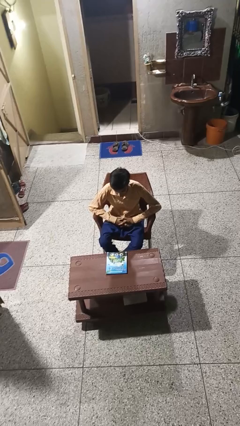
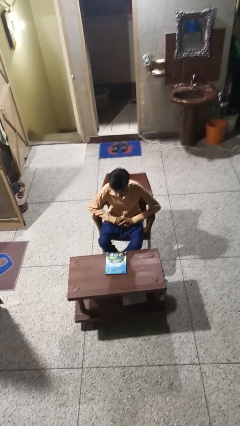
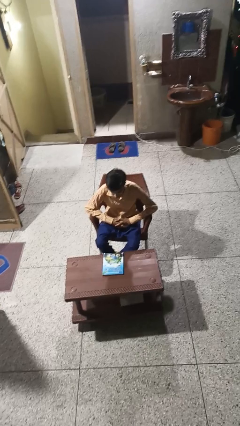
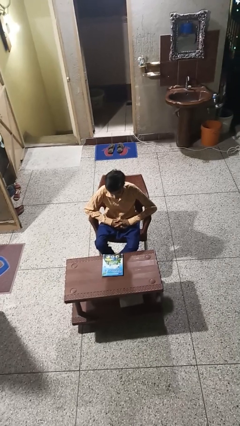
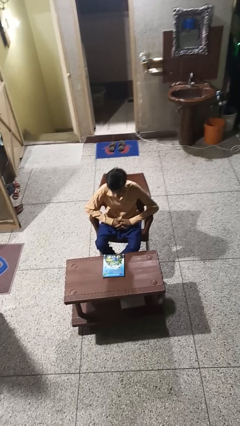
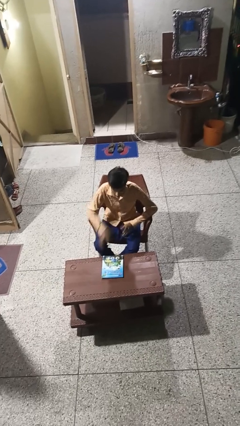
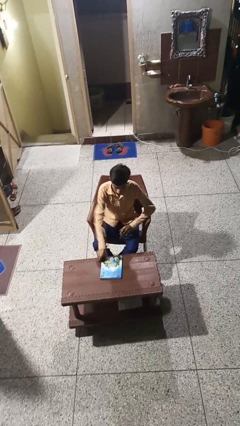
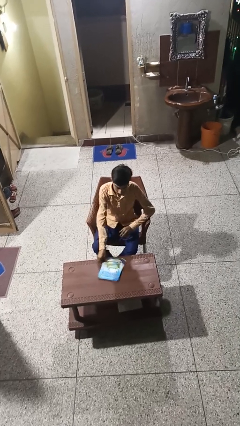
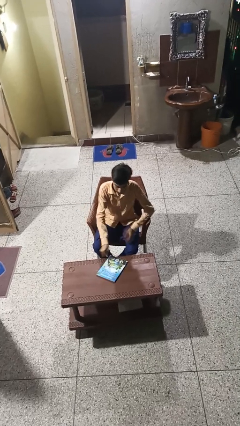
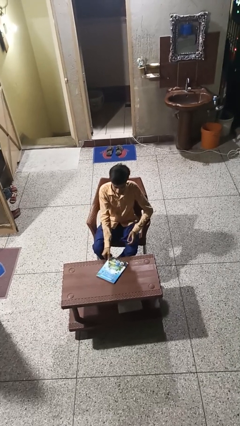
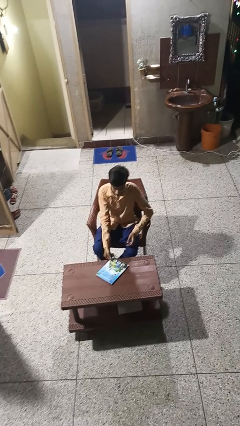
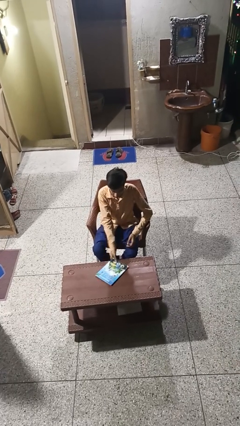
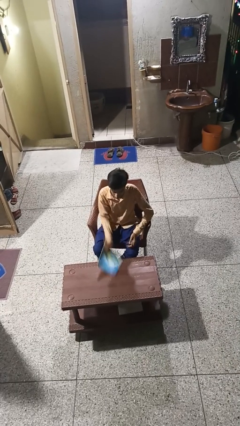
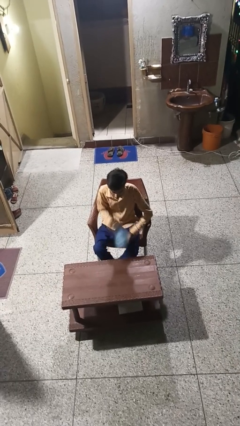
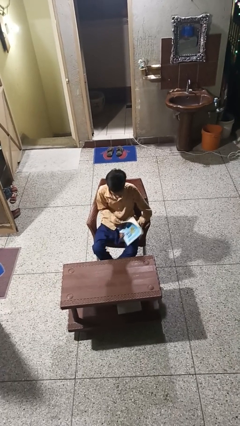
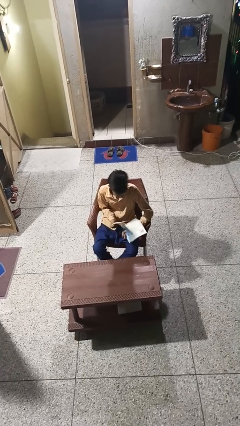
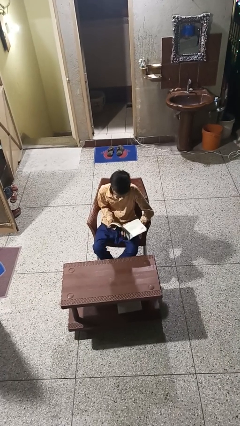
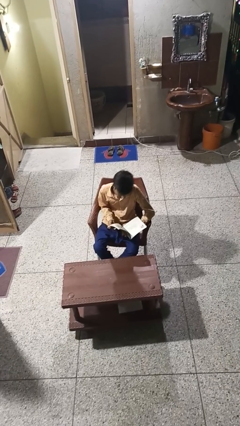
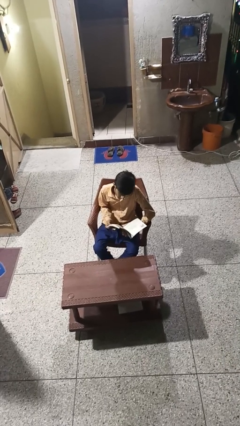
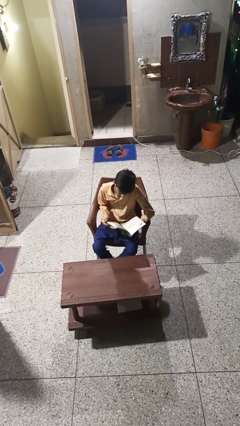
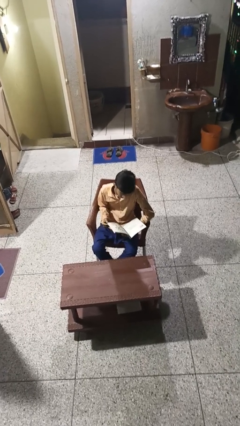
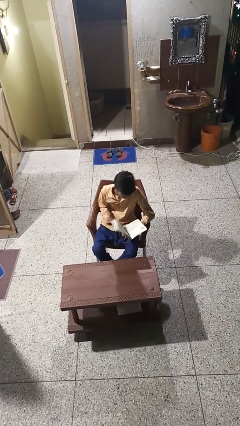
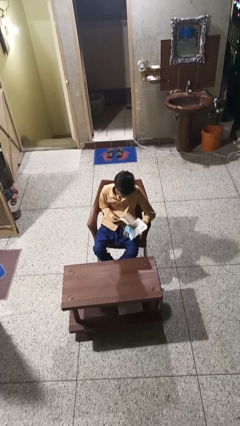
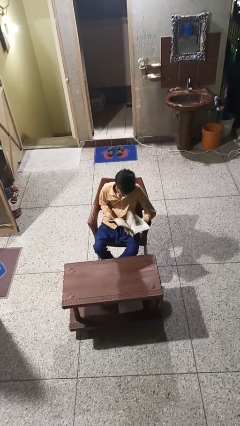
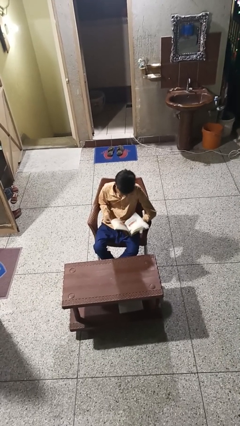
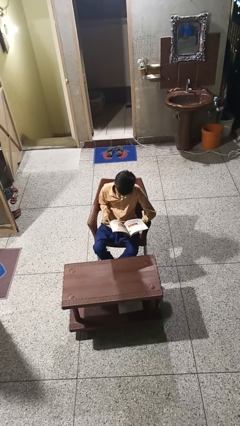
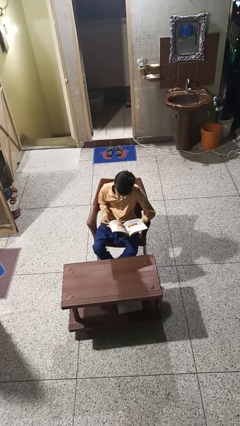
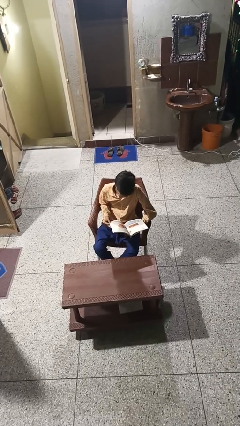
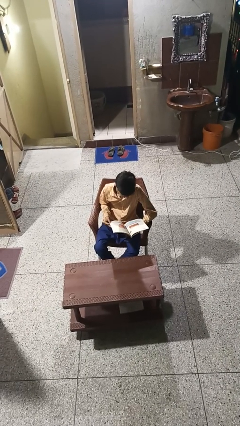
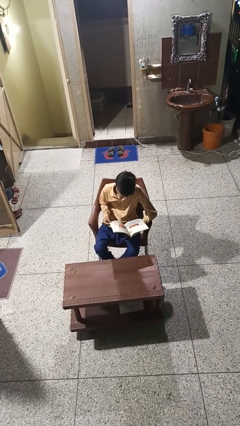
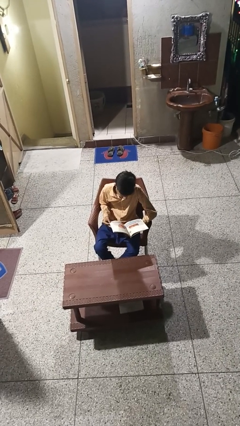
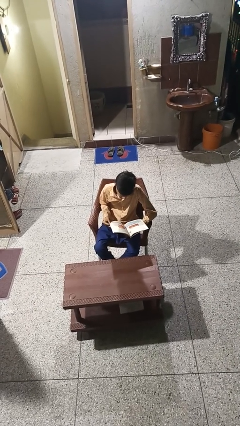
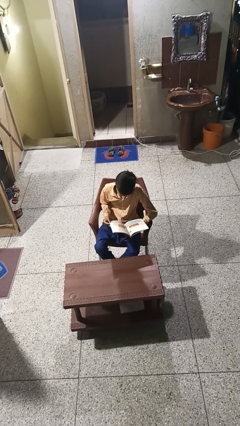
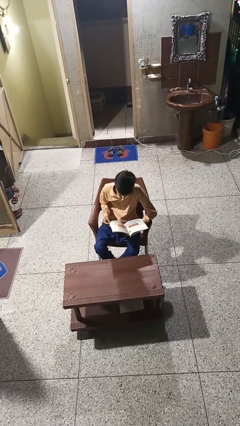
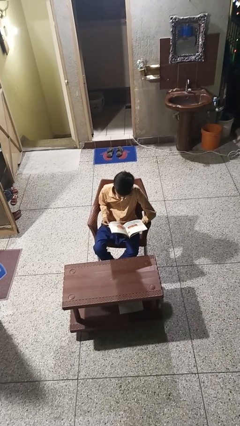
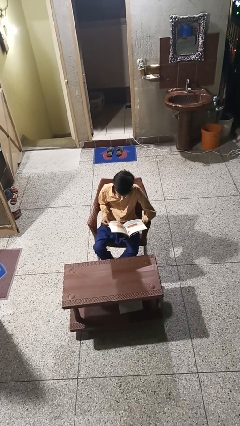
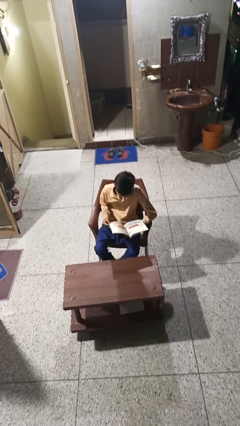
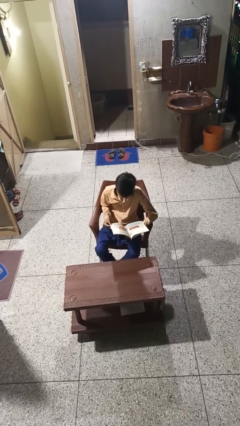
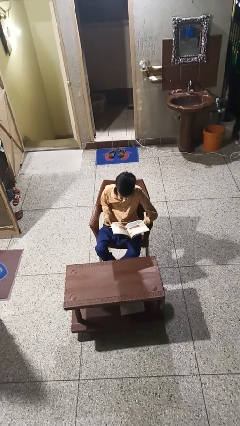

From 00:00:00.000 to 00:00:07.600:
person reads book

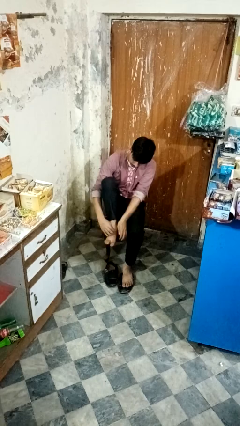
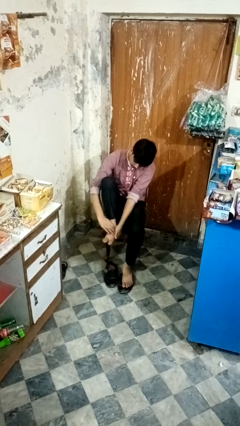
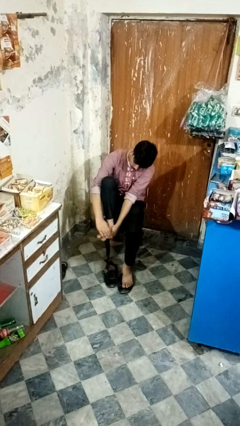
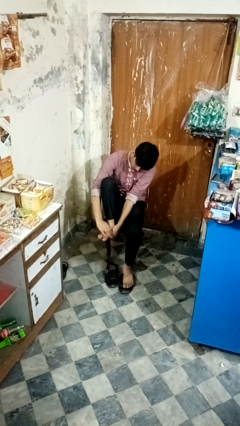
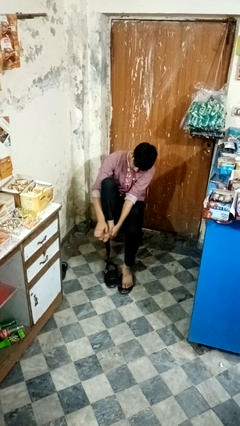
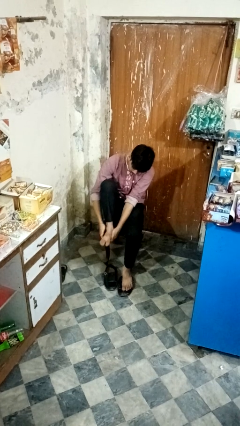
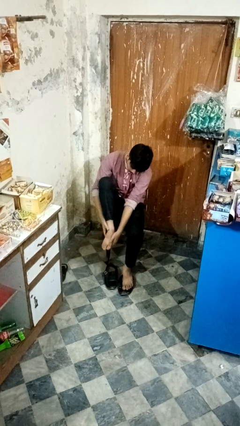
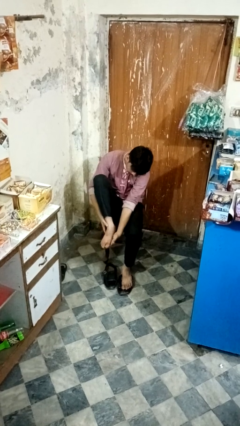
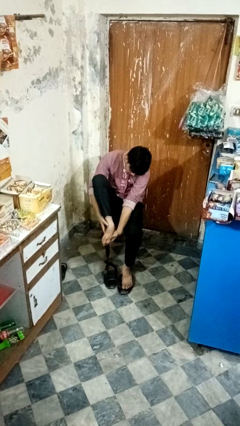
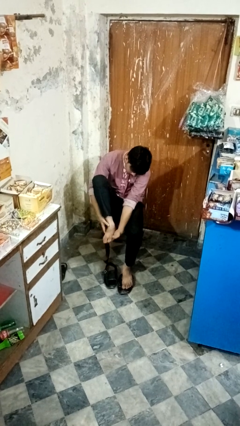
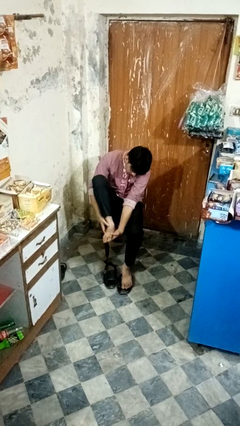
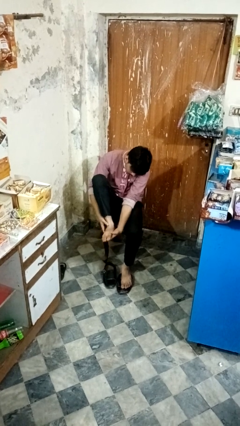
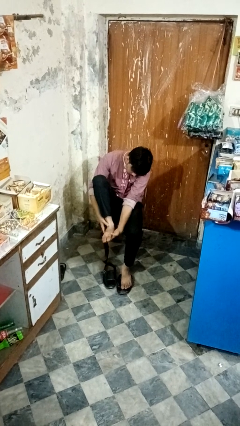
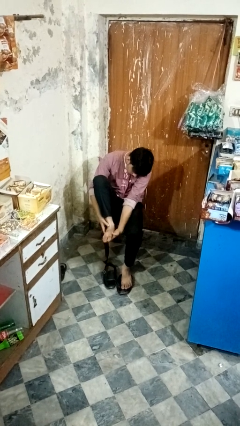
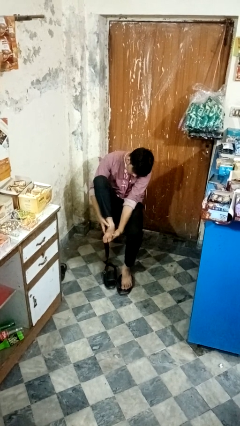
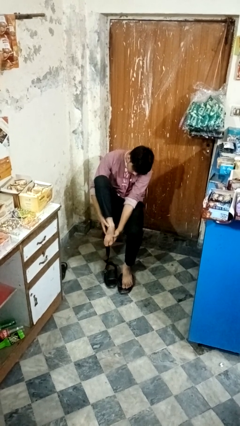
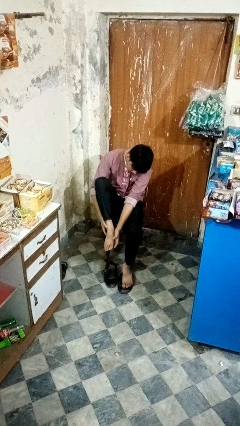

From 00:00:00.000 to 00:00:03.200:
person rubs foot

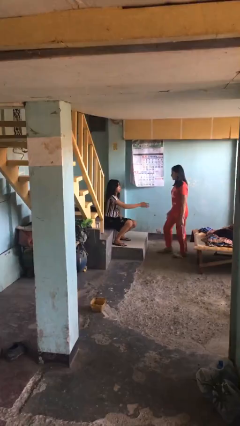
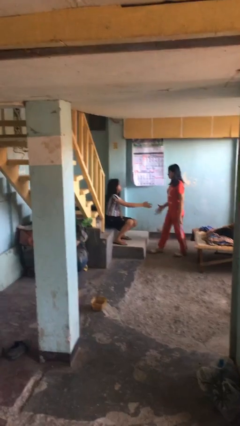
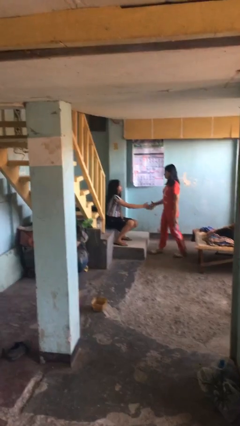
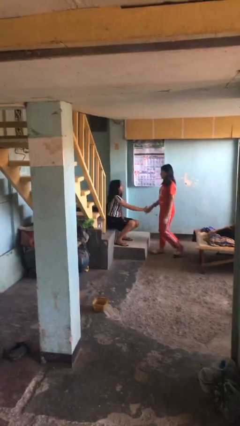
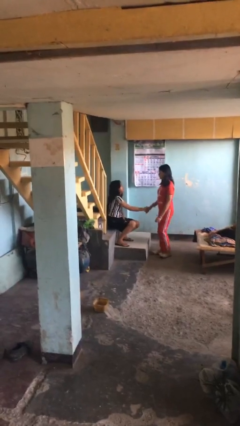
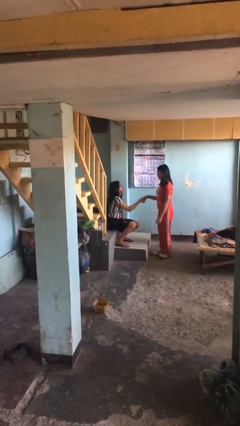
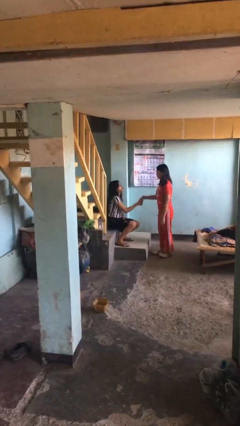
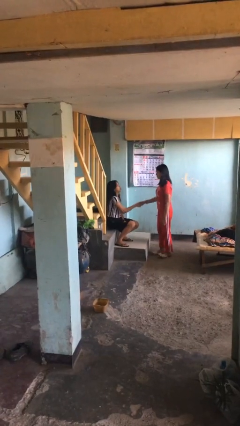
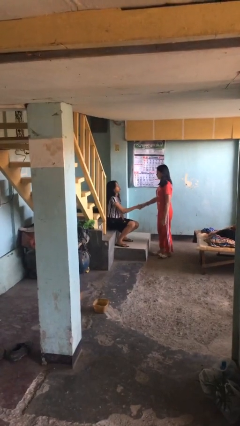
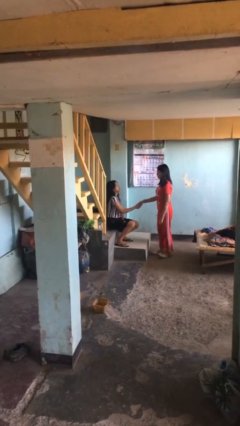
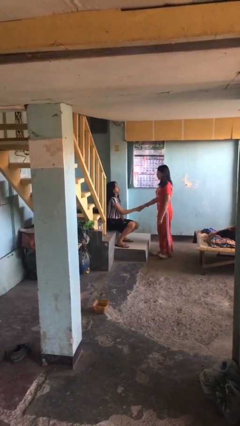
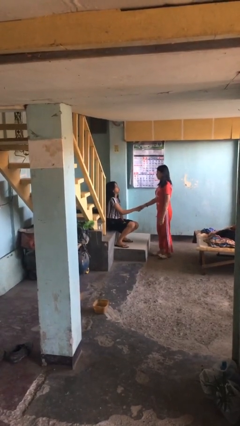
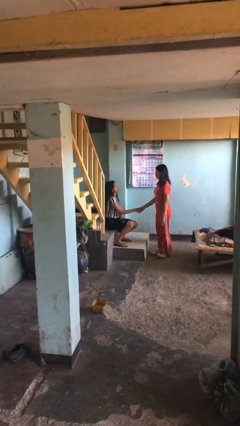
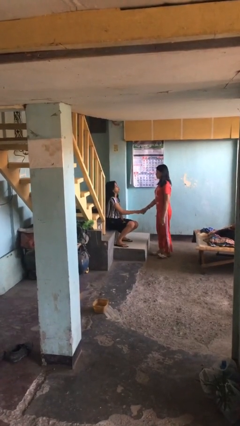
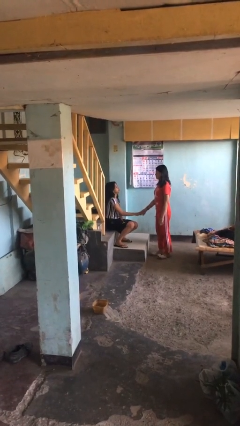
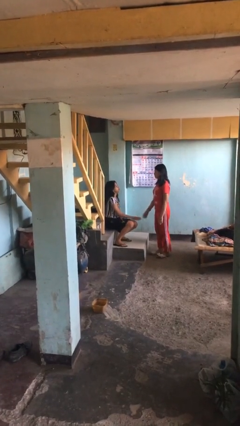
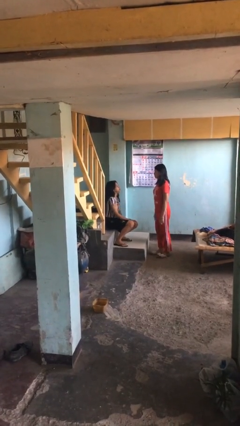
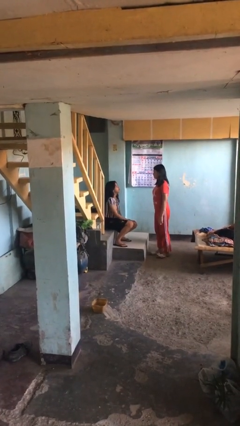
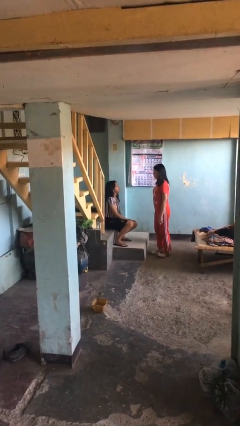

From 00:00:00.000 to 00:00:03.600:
person shakes hand

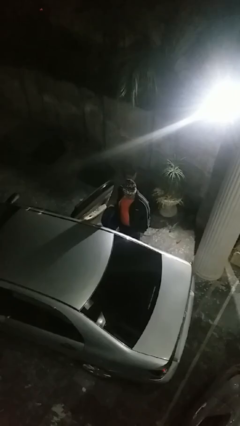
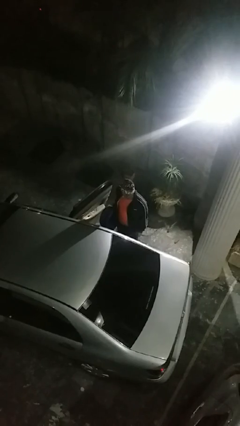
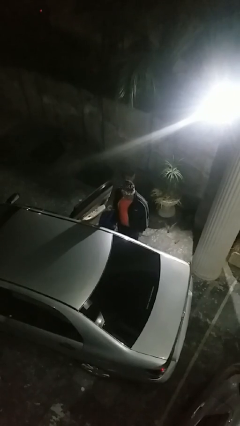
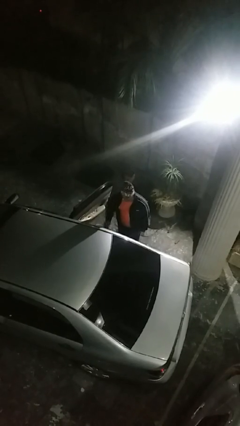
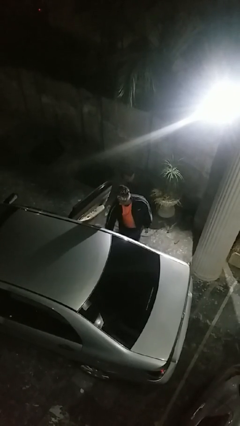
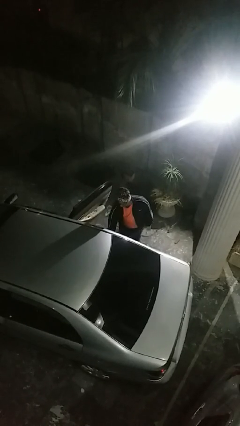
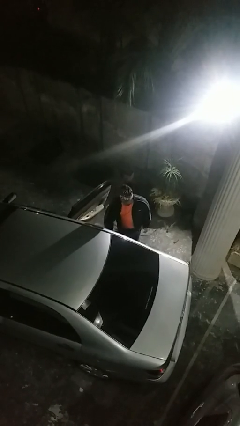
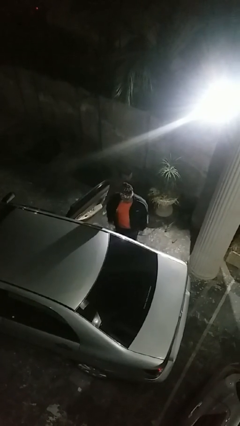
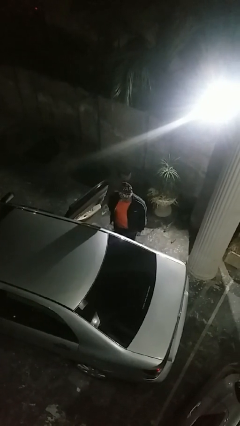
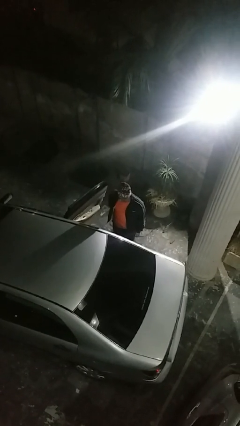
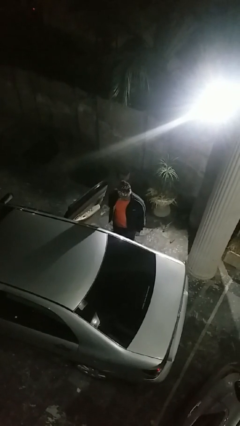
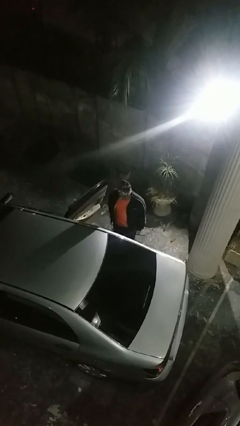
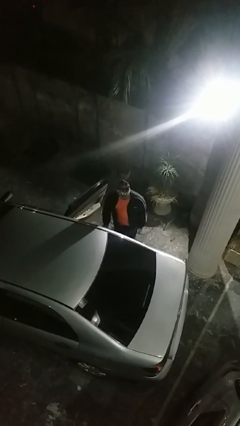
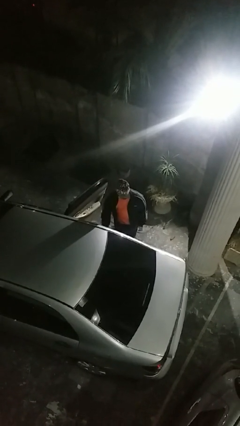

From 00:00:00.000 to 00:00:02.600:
person loads car

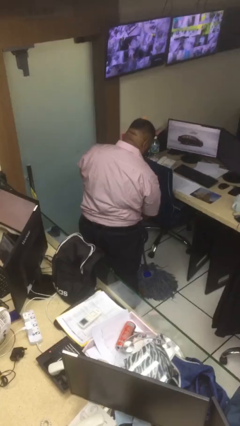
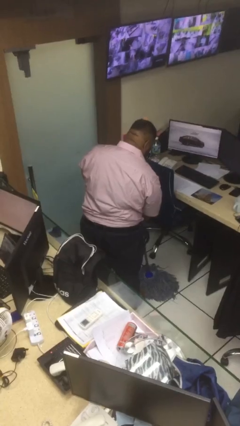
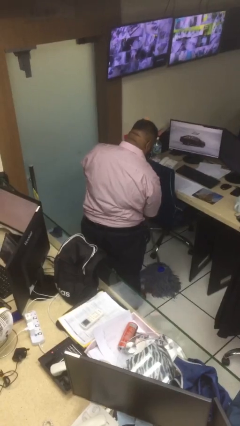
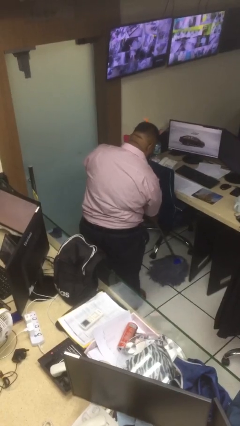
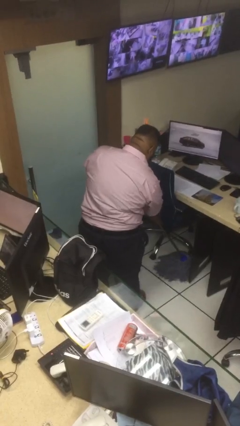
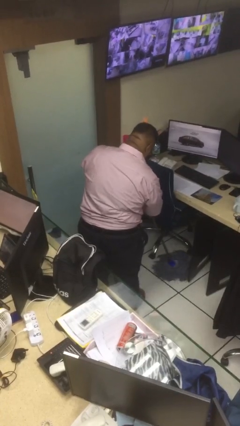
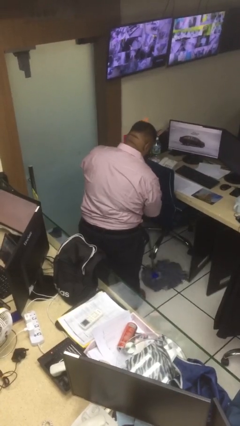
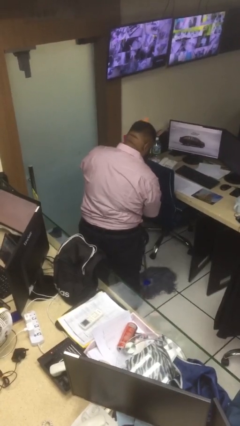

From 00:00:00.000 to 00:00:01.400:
person mops
